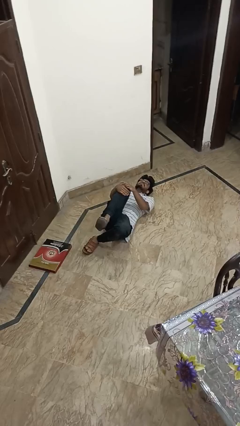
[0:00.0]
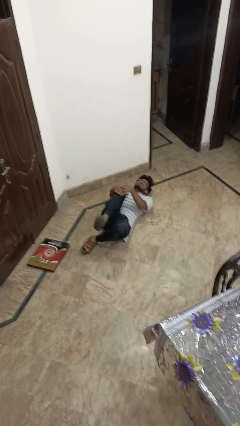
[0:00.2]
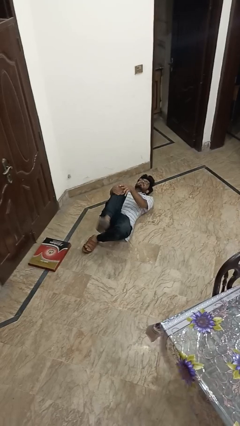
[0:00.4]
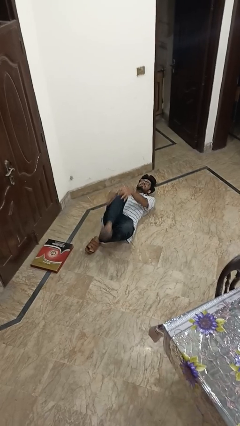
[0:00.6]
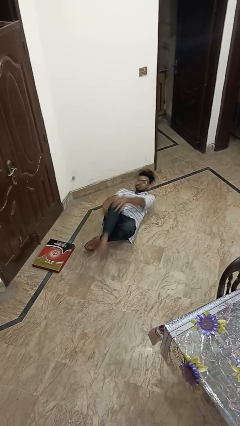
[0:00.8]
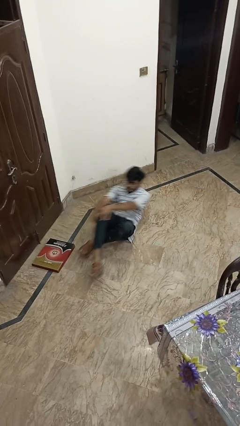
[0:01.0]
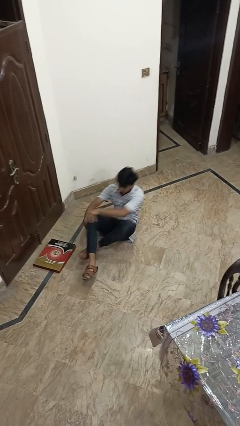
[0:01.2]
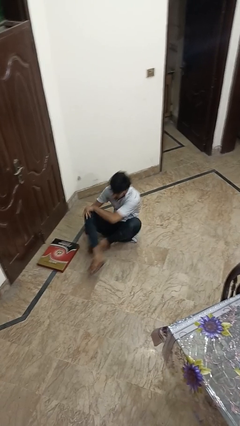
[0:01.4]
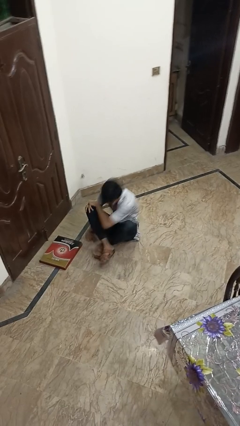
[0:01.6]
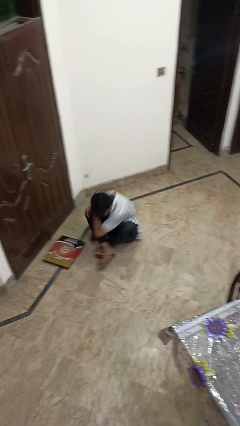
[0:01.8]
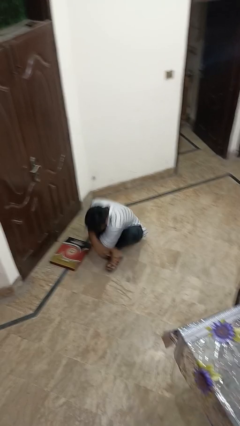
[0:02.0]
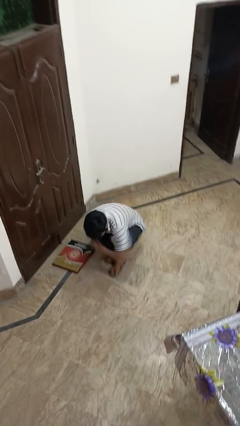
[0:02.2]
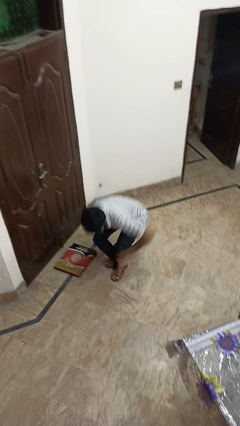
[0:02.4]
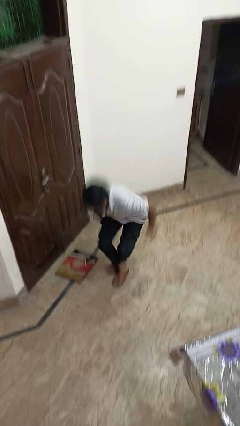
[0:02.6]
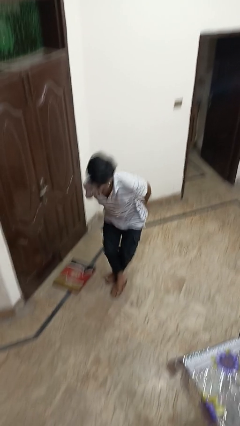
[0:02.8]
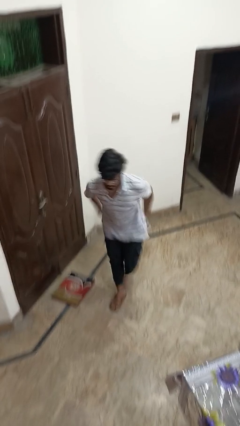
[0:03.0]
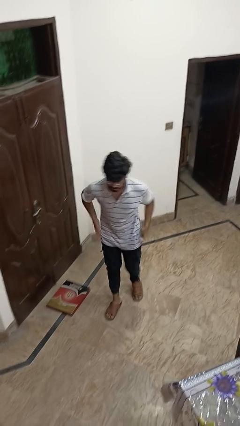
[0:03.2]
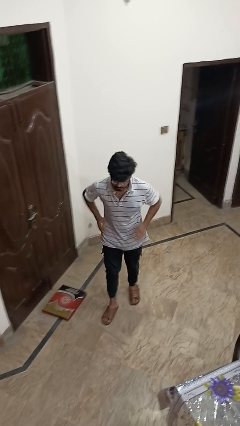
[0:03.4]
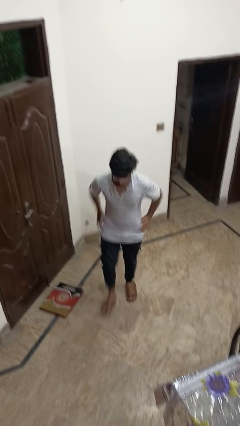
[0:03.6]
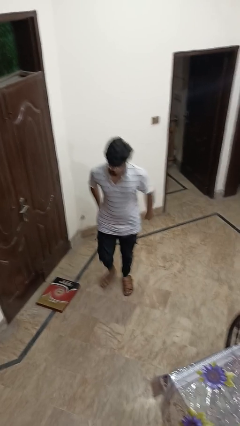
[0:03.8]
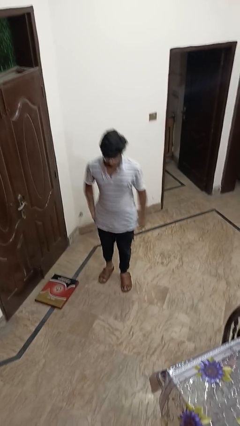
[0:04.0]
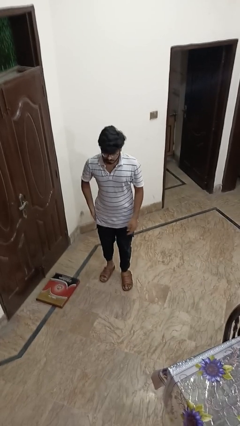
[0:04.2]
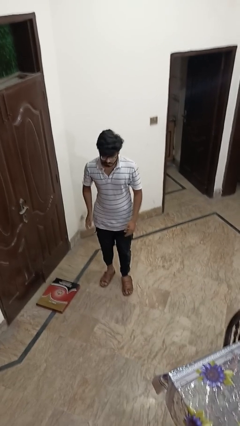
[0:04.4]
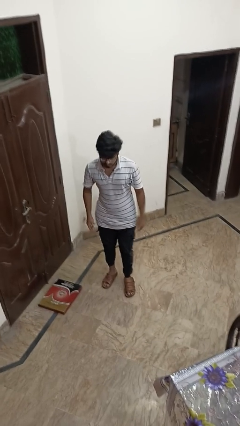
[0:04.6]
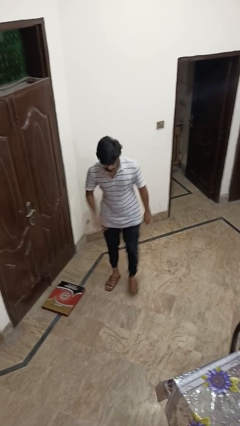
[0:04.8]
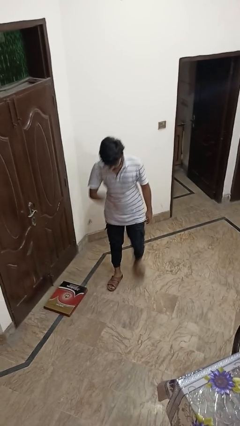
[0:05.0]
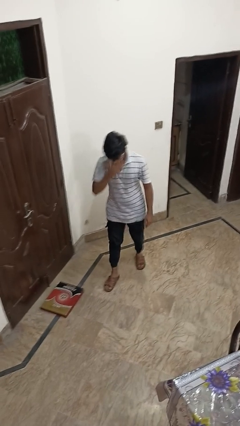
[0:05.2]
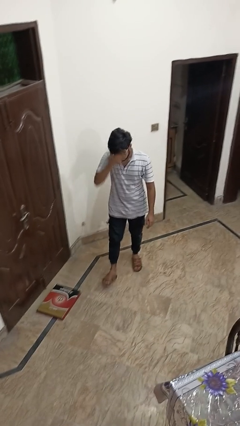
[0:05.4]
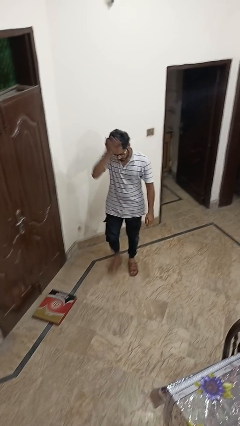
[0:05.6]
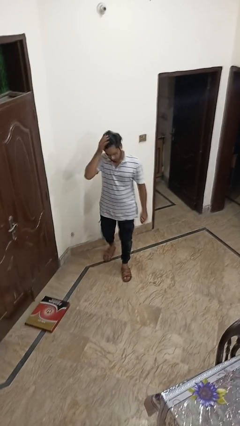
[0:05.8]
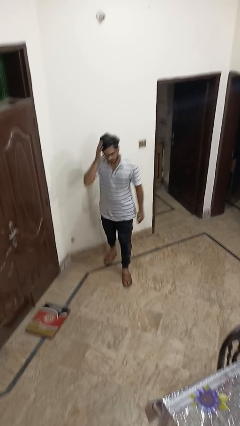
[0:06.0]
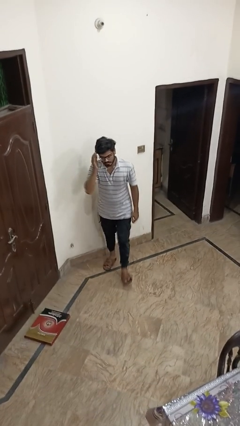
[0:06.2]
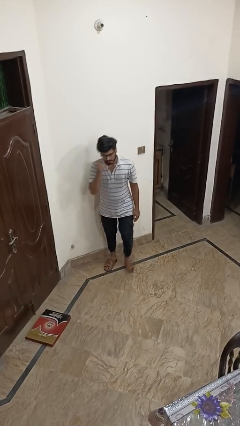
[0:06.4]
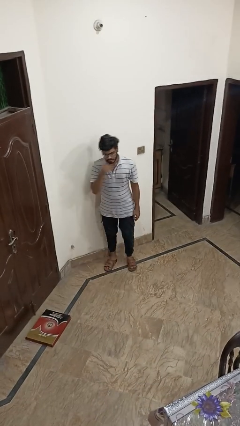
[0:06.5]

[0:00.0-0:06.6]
person stands up from floor

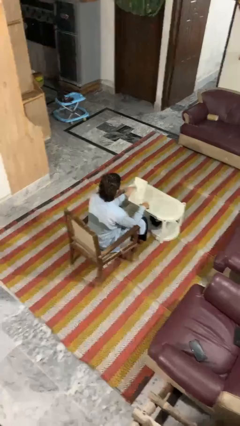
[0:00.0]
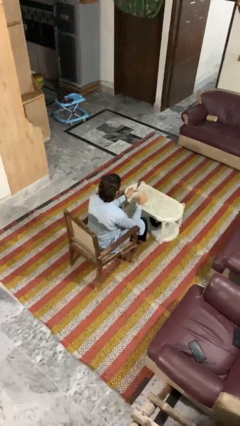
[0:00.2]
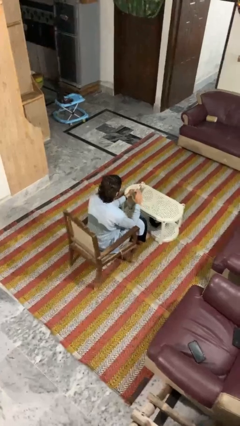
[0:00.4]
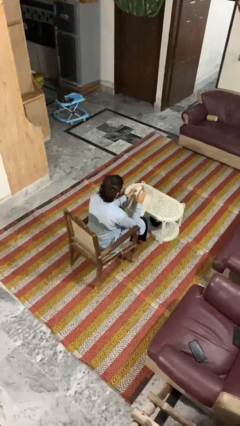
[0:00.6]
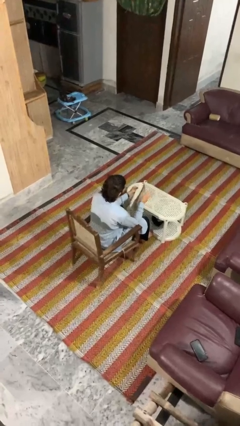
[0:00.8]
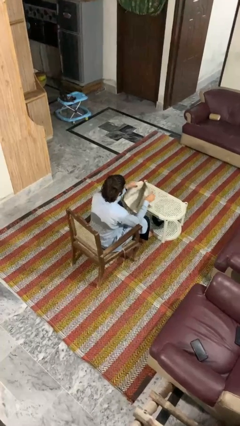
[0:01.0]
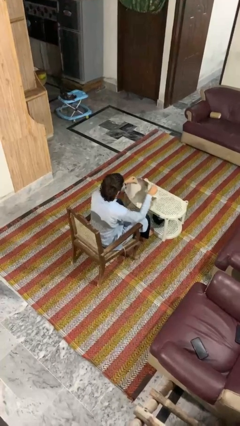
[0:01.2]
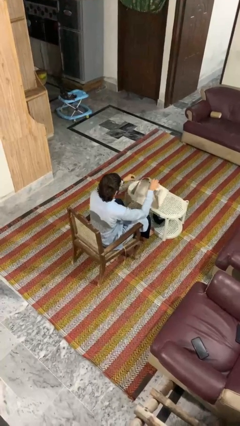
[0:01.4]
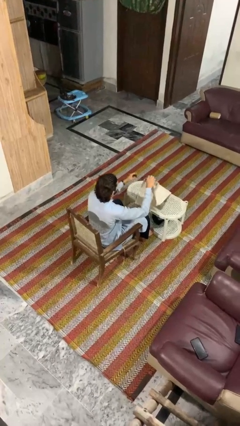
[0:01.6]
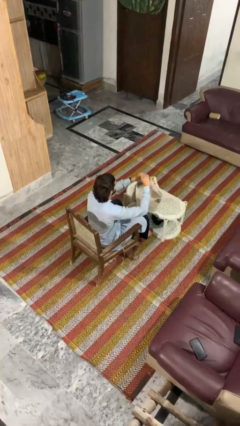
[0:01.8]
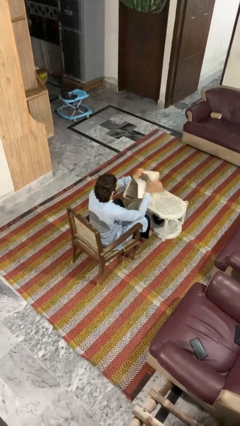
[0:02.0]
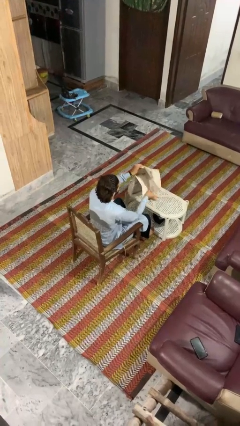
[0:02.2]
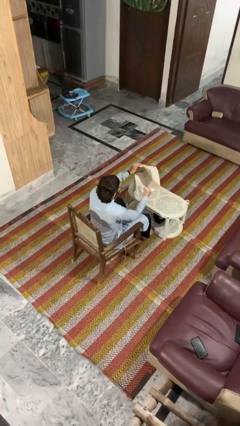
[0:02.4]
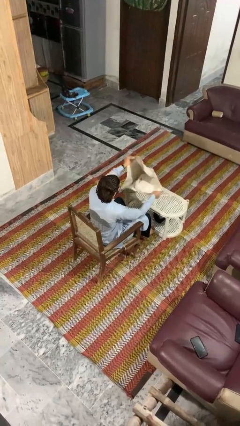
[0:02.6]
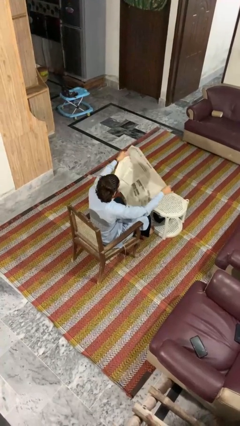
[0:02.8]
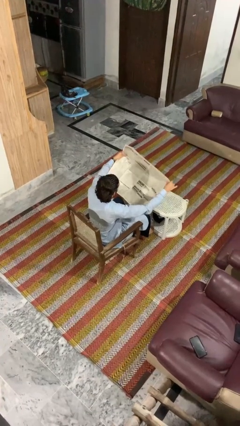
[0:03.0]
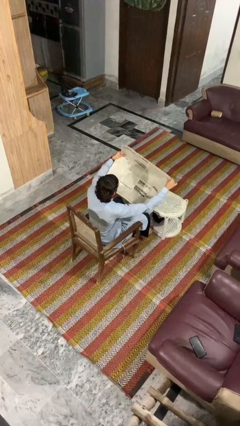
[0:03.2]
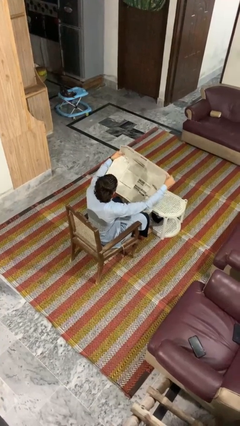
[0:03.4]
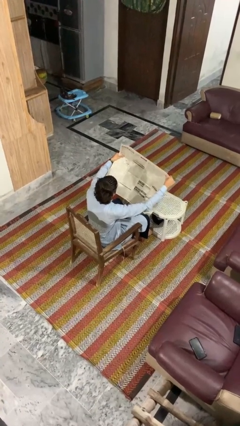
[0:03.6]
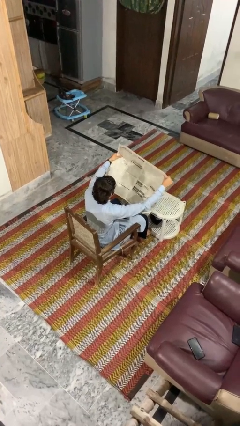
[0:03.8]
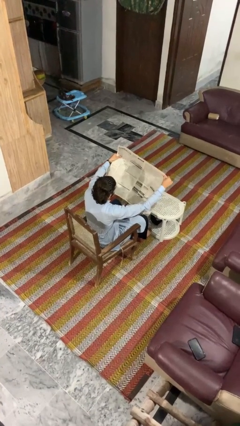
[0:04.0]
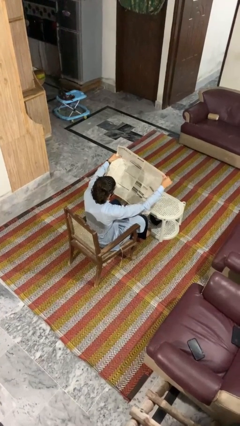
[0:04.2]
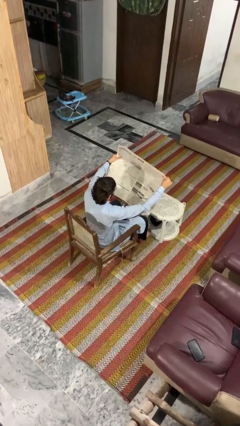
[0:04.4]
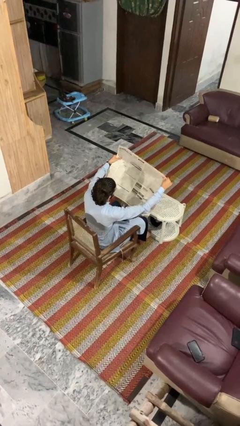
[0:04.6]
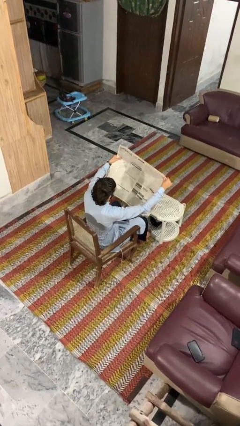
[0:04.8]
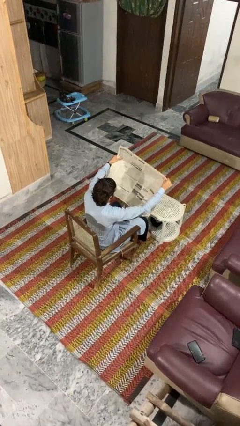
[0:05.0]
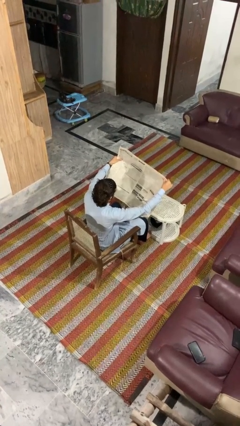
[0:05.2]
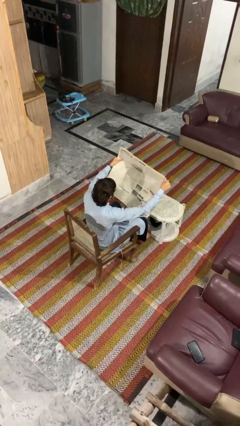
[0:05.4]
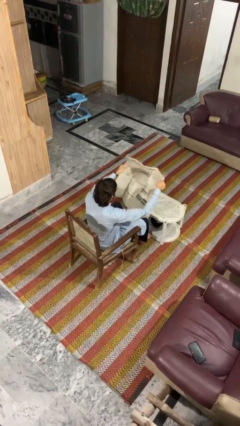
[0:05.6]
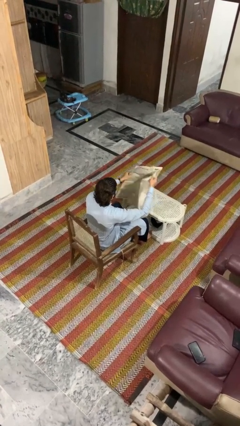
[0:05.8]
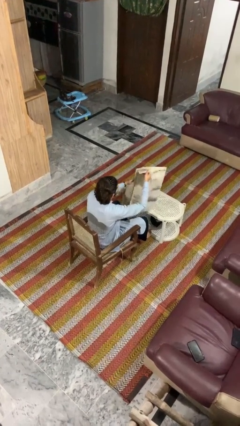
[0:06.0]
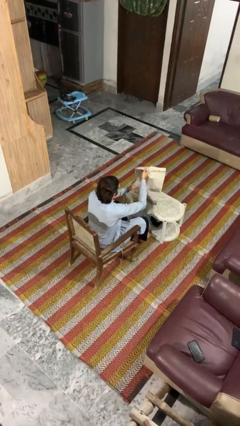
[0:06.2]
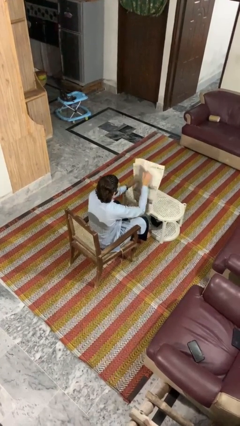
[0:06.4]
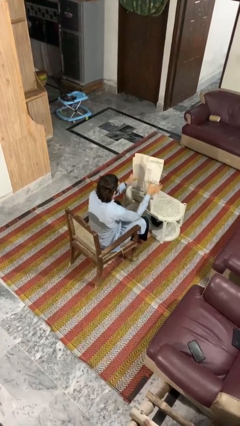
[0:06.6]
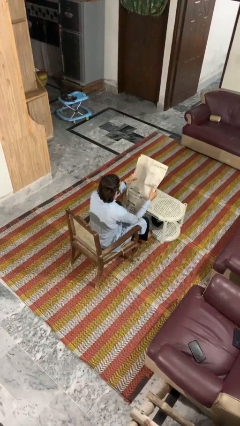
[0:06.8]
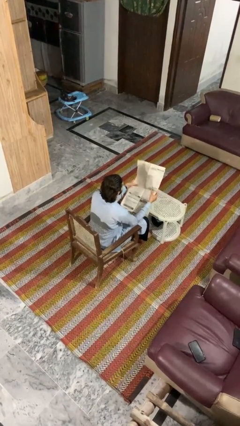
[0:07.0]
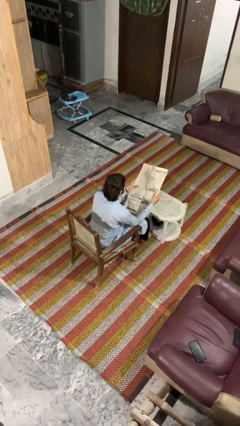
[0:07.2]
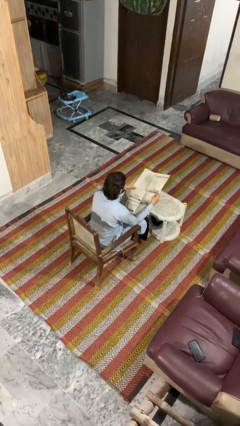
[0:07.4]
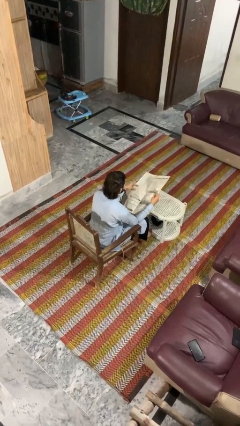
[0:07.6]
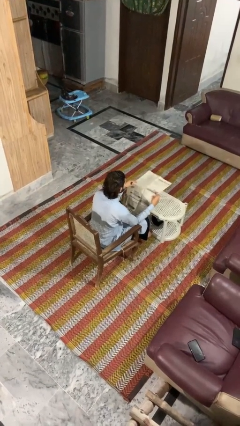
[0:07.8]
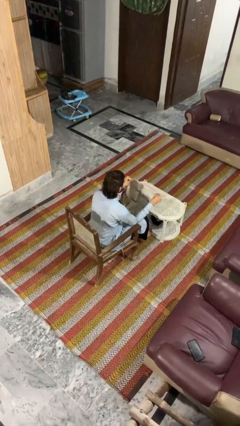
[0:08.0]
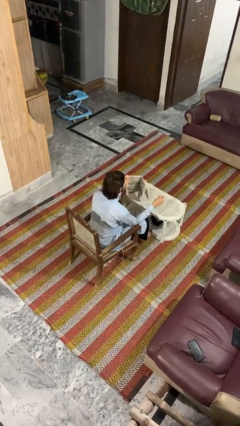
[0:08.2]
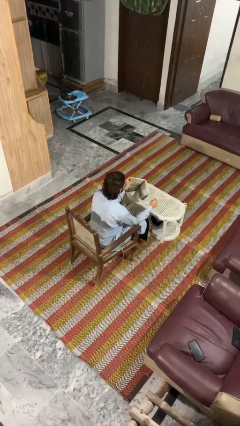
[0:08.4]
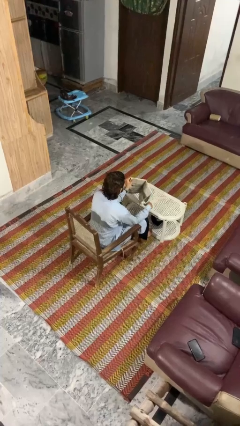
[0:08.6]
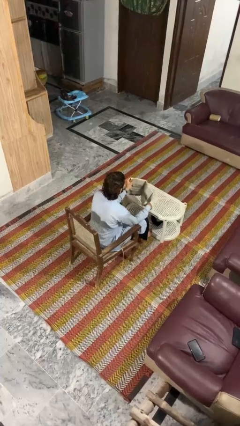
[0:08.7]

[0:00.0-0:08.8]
person reads newspaper

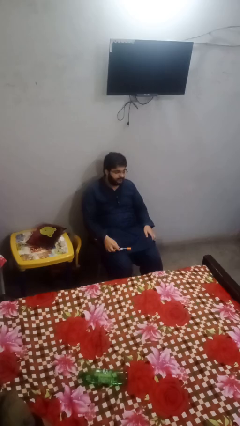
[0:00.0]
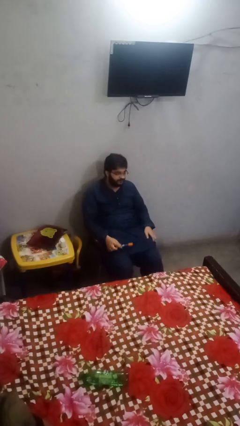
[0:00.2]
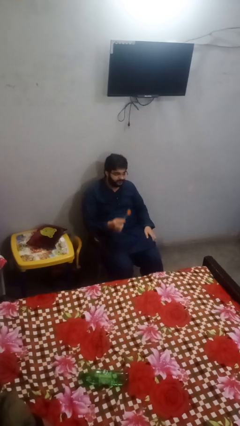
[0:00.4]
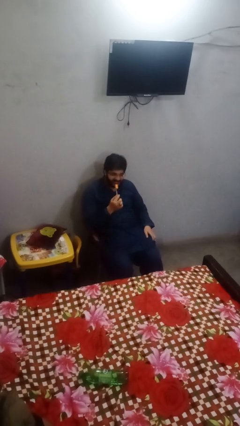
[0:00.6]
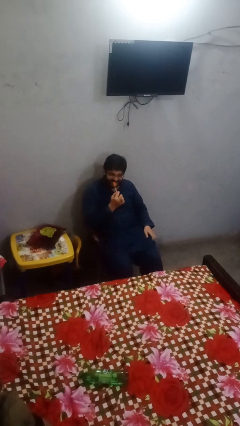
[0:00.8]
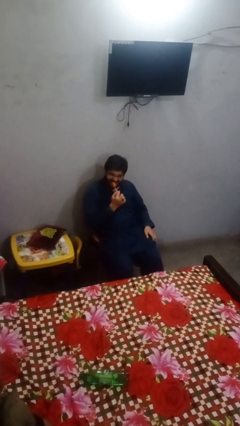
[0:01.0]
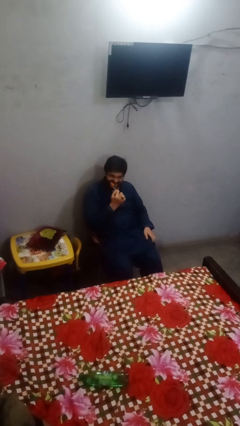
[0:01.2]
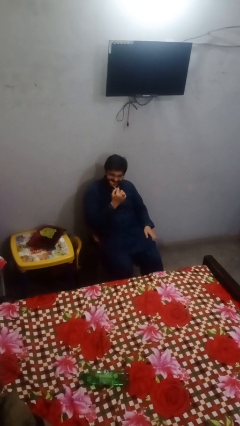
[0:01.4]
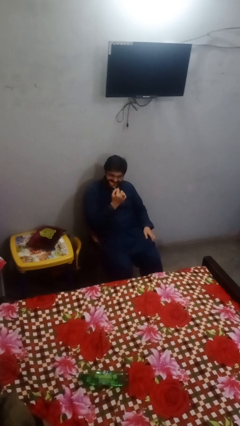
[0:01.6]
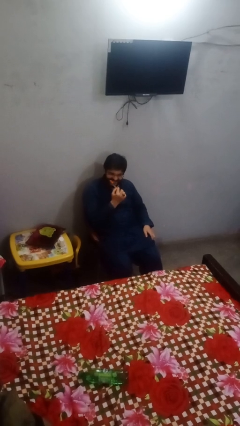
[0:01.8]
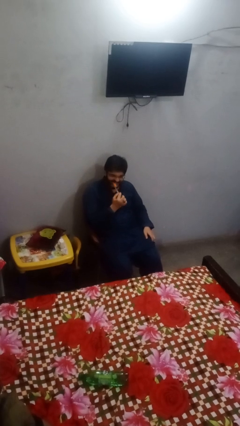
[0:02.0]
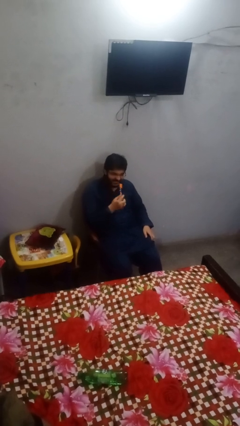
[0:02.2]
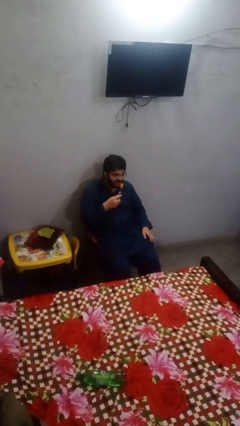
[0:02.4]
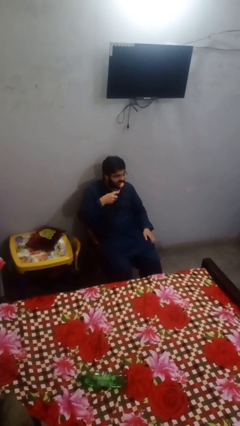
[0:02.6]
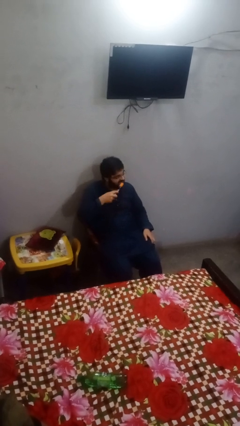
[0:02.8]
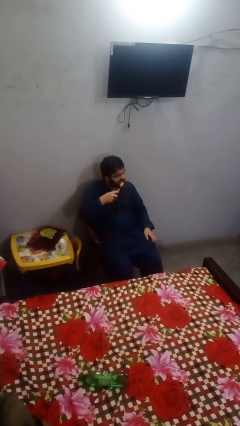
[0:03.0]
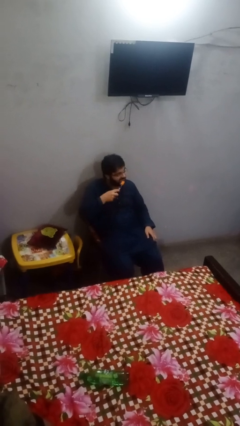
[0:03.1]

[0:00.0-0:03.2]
person brushes teeth
